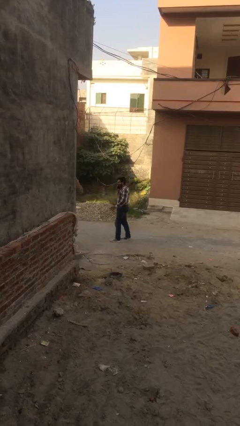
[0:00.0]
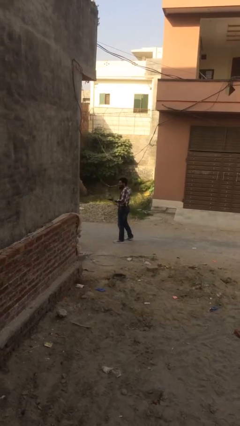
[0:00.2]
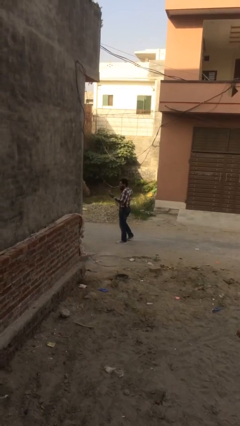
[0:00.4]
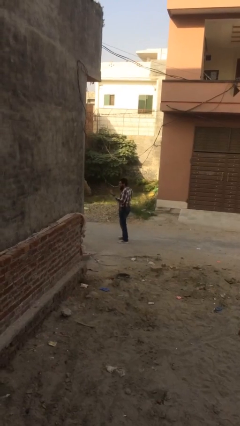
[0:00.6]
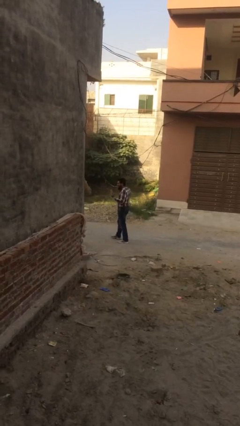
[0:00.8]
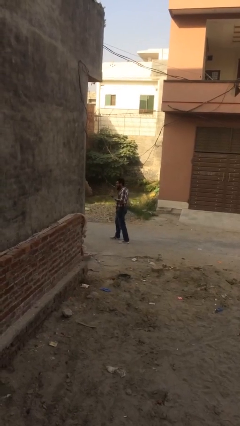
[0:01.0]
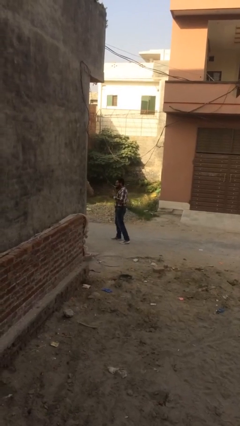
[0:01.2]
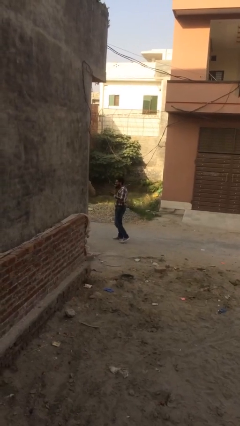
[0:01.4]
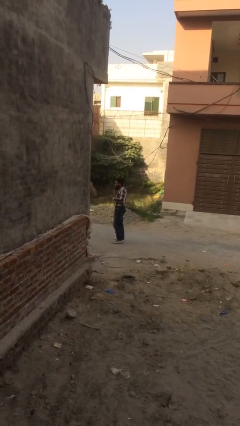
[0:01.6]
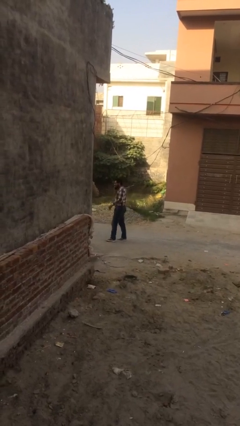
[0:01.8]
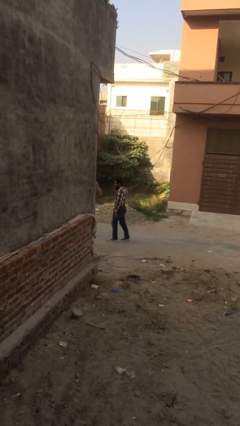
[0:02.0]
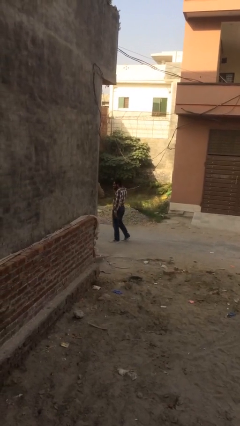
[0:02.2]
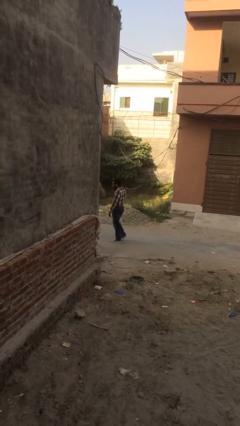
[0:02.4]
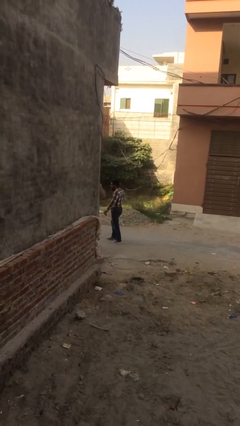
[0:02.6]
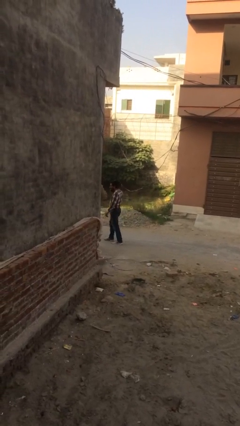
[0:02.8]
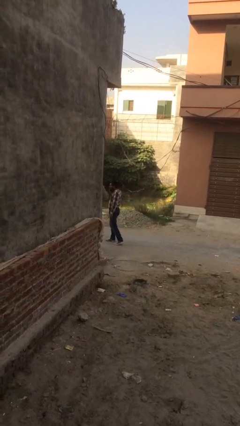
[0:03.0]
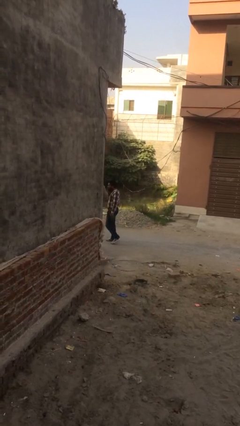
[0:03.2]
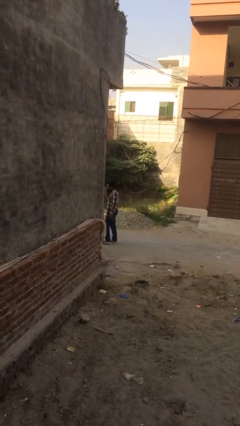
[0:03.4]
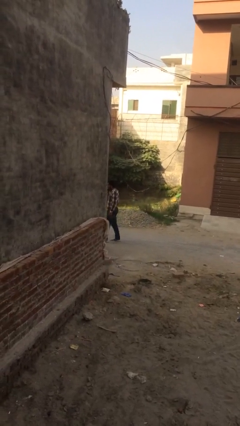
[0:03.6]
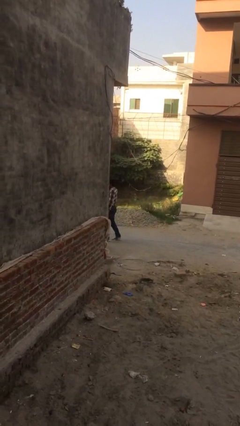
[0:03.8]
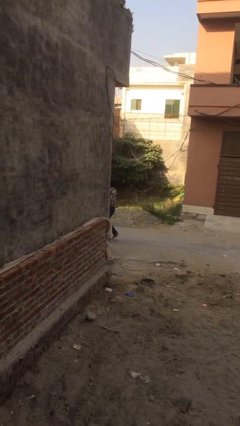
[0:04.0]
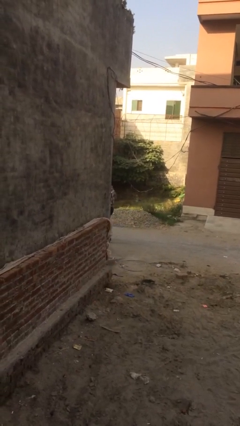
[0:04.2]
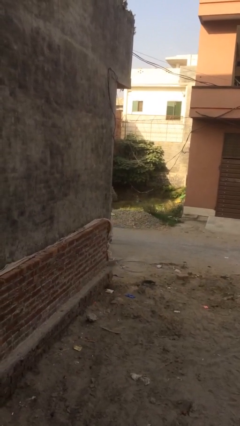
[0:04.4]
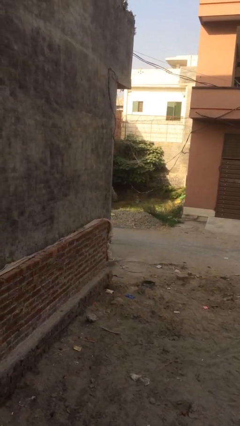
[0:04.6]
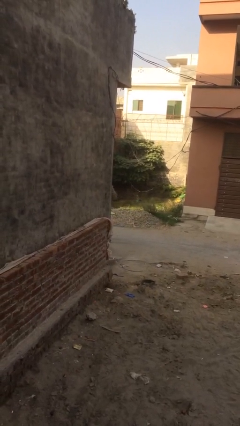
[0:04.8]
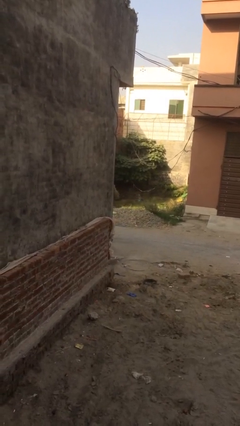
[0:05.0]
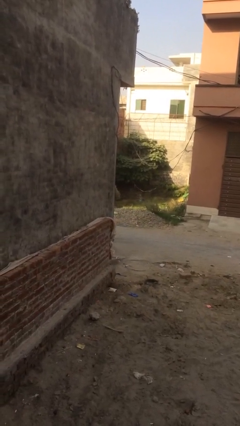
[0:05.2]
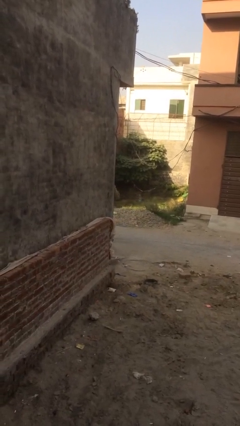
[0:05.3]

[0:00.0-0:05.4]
person exits scene through structure

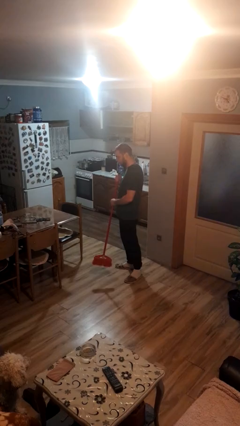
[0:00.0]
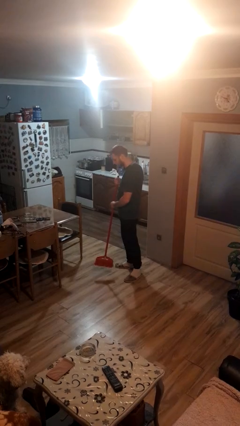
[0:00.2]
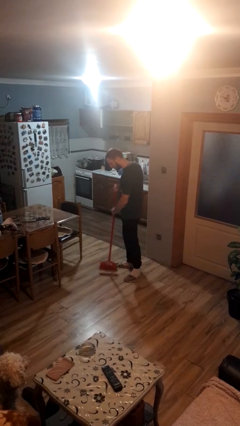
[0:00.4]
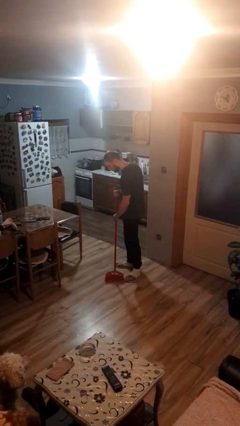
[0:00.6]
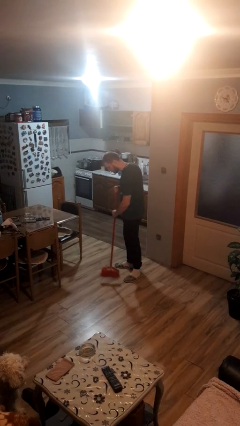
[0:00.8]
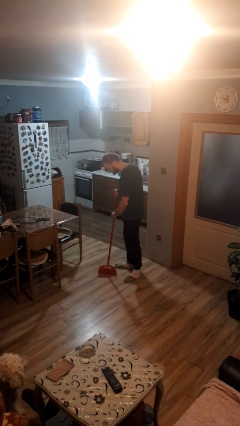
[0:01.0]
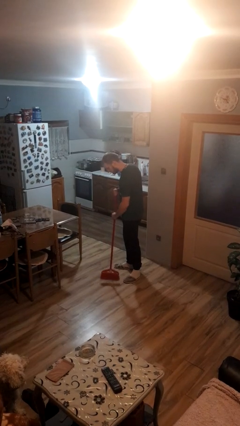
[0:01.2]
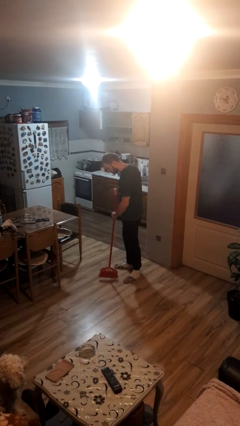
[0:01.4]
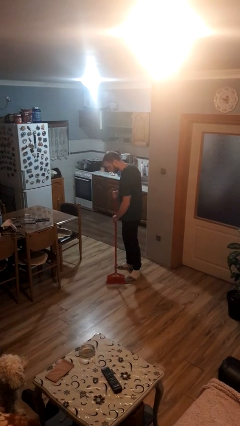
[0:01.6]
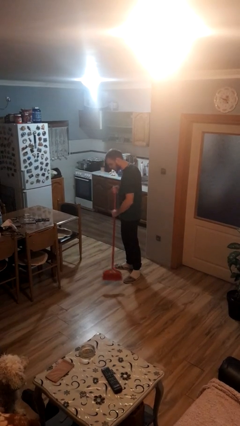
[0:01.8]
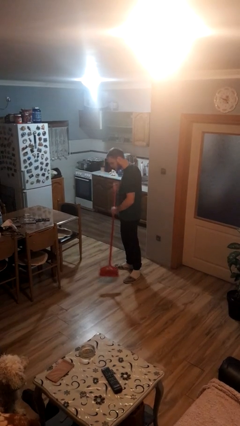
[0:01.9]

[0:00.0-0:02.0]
person sweeps floor

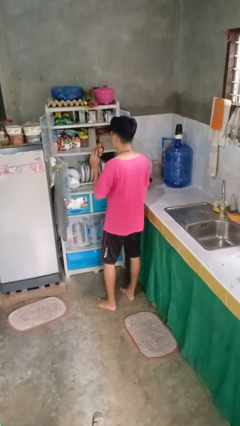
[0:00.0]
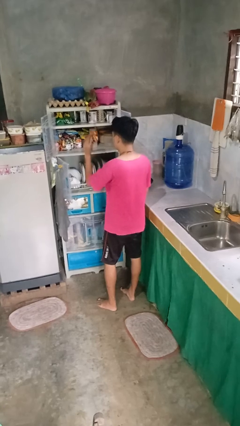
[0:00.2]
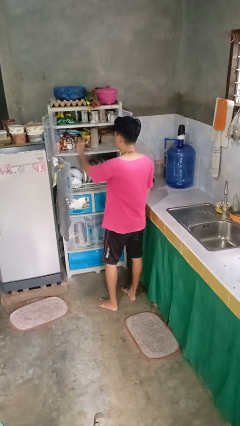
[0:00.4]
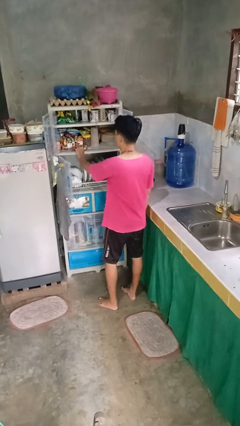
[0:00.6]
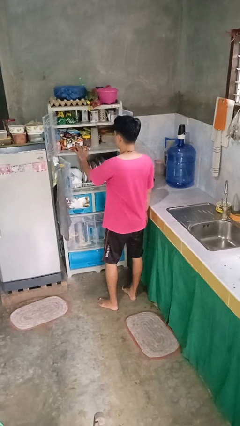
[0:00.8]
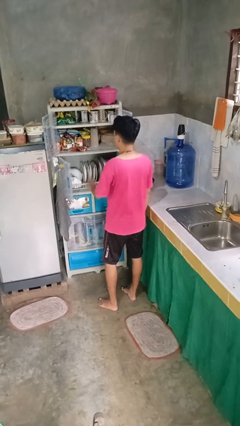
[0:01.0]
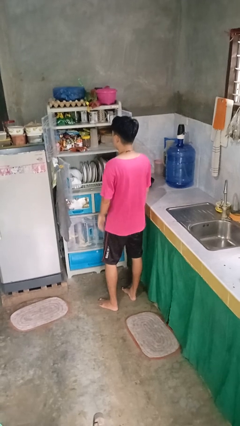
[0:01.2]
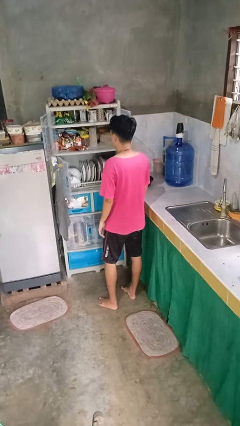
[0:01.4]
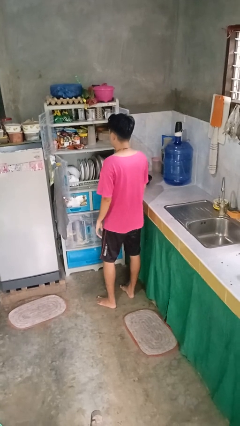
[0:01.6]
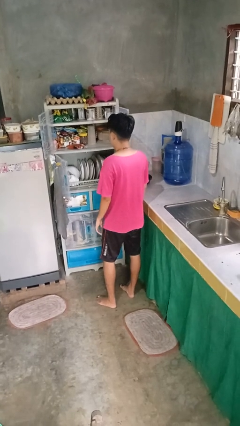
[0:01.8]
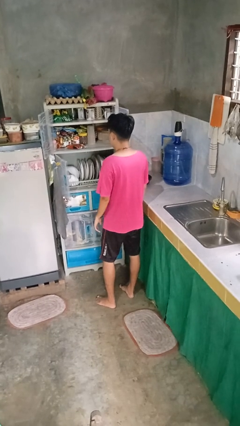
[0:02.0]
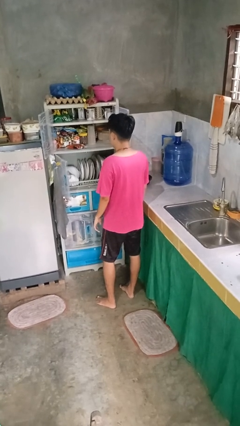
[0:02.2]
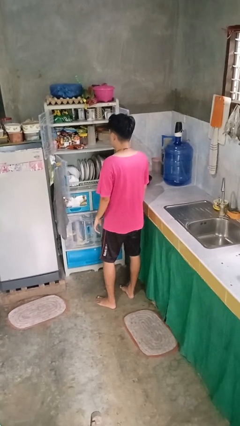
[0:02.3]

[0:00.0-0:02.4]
person puts object in cabinet

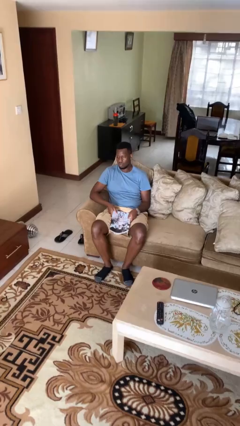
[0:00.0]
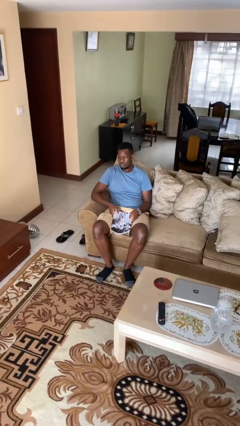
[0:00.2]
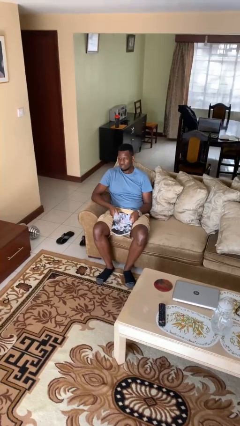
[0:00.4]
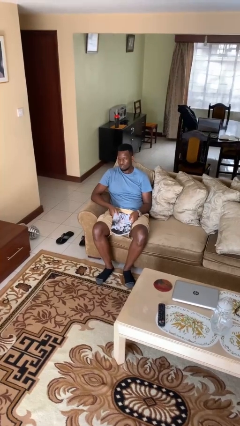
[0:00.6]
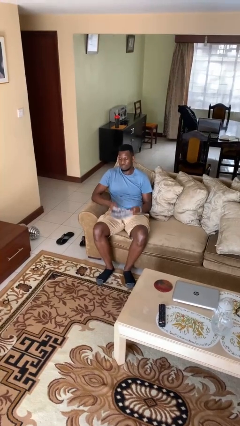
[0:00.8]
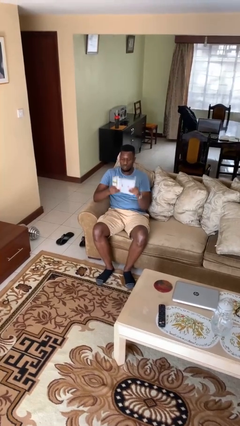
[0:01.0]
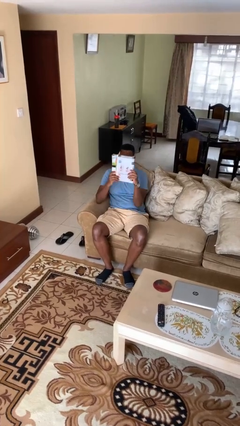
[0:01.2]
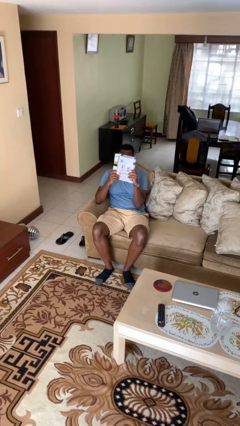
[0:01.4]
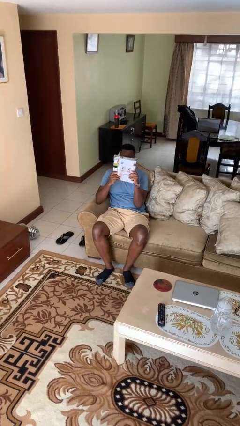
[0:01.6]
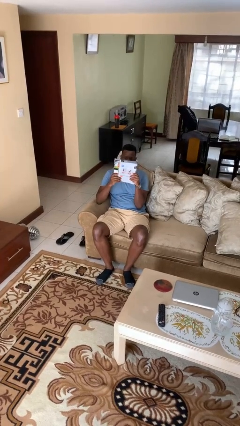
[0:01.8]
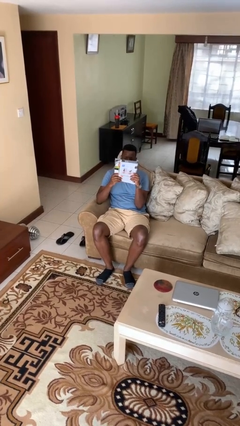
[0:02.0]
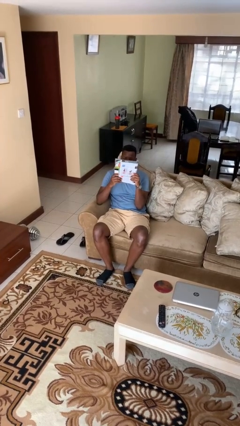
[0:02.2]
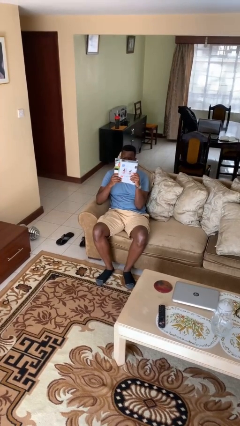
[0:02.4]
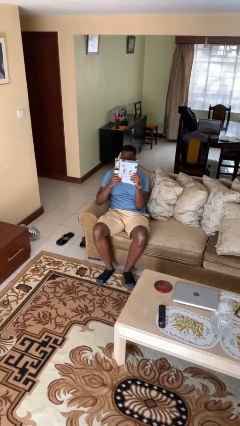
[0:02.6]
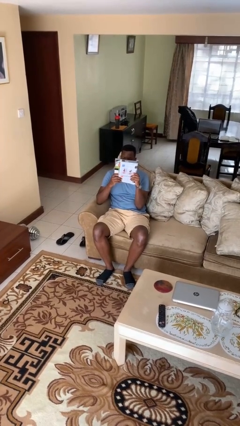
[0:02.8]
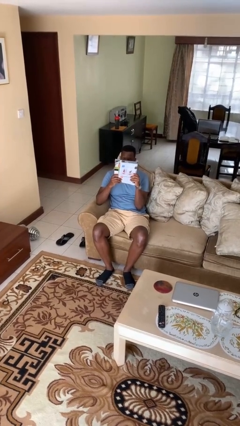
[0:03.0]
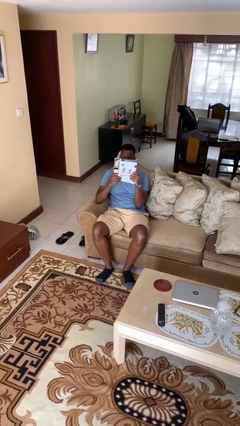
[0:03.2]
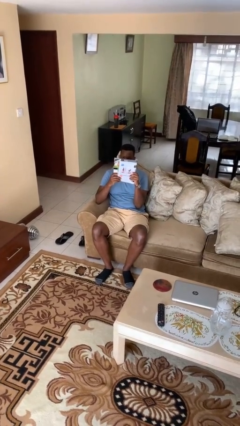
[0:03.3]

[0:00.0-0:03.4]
person reads document

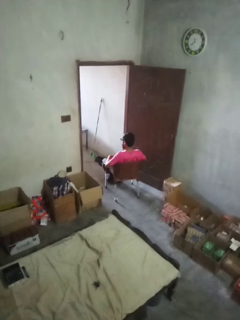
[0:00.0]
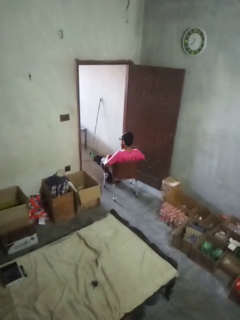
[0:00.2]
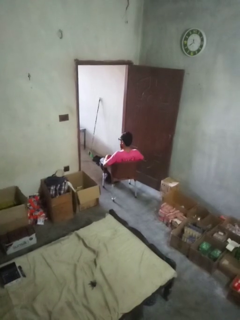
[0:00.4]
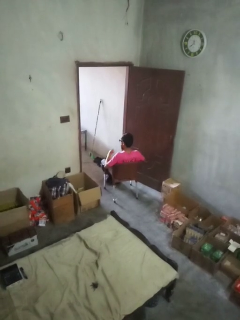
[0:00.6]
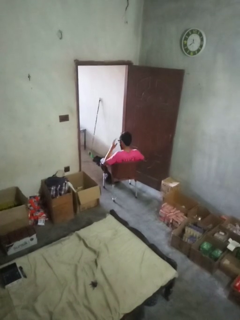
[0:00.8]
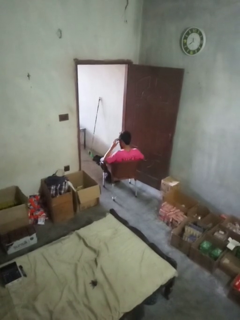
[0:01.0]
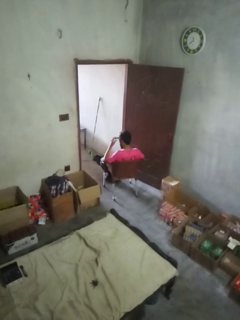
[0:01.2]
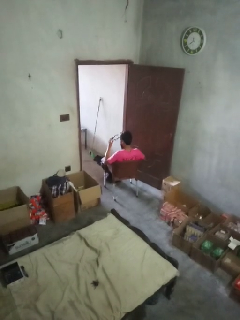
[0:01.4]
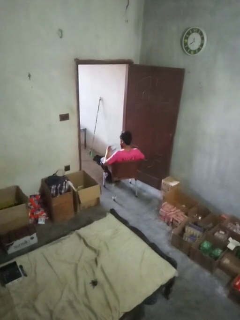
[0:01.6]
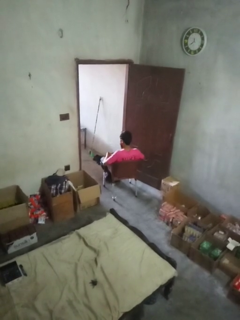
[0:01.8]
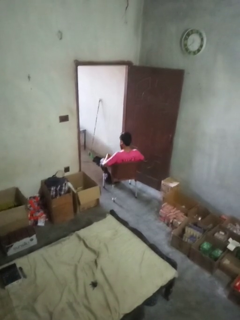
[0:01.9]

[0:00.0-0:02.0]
person takes off glasses

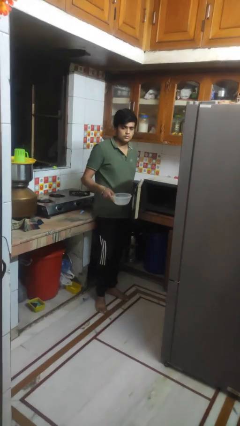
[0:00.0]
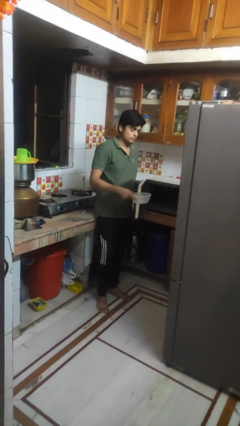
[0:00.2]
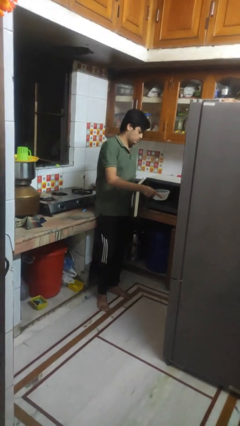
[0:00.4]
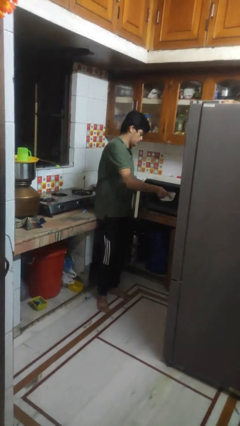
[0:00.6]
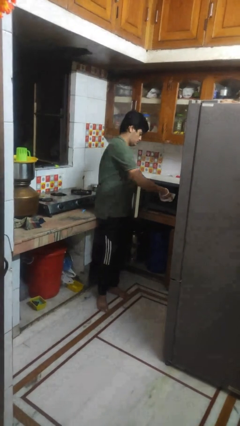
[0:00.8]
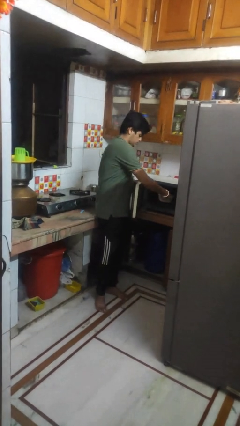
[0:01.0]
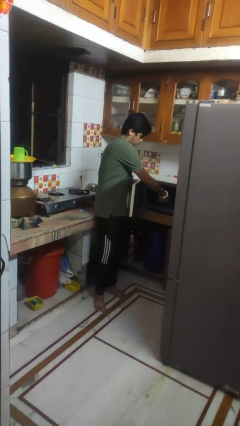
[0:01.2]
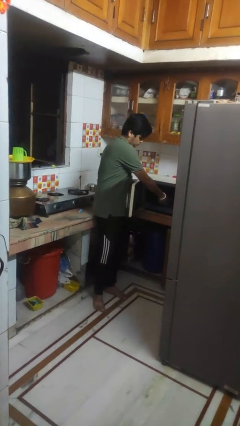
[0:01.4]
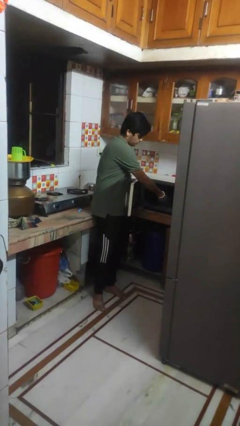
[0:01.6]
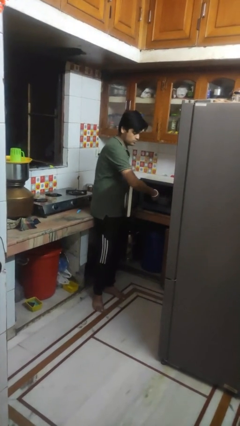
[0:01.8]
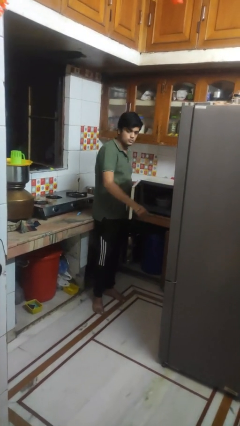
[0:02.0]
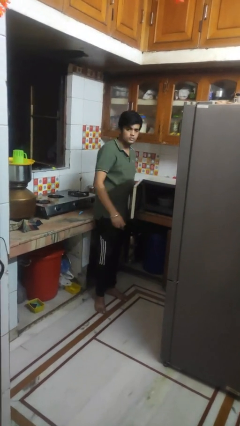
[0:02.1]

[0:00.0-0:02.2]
person puts object into microwave

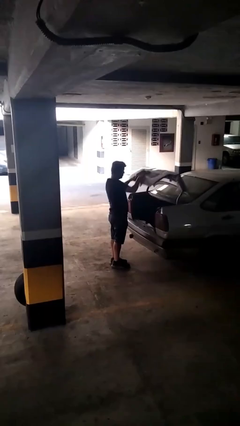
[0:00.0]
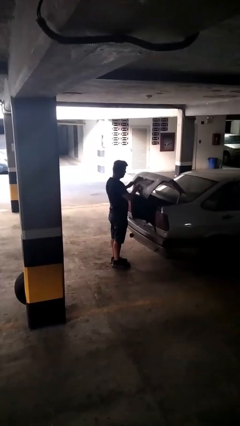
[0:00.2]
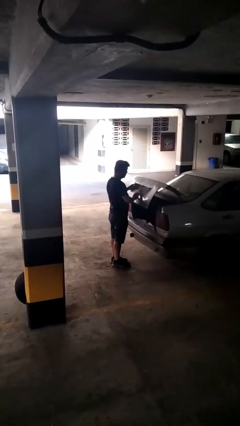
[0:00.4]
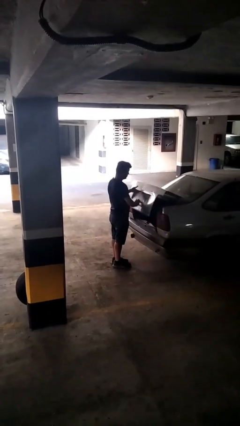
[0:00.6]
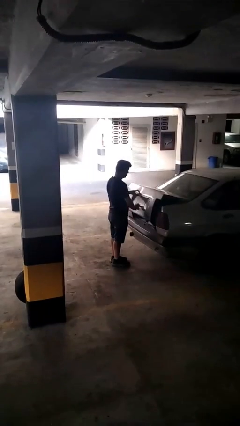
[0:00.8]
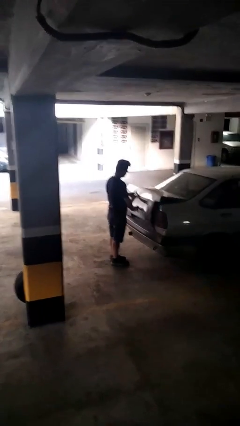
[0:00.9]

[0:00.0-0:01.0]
person closes car trunk
